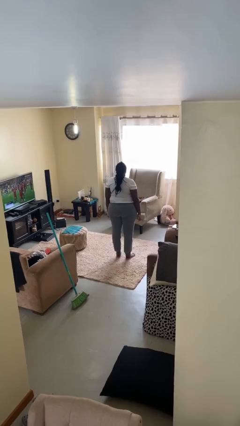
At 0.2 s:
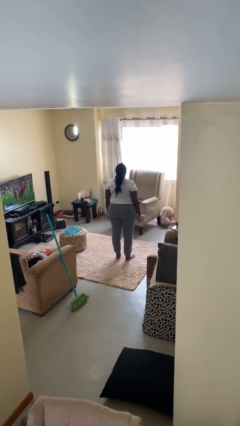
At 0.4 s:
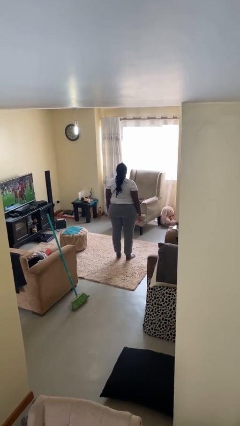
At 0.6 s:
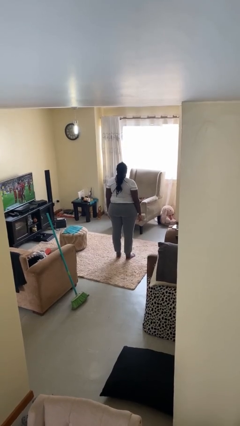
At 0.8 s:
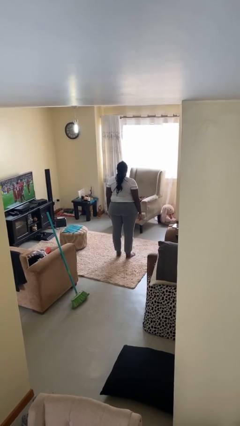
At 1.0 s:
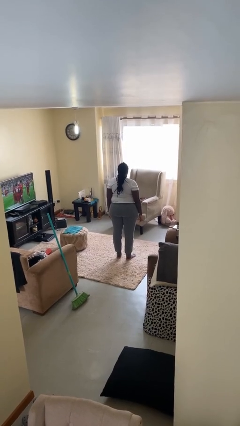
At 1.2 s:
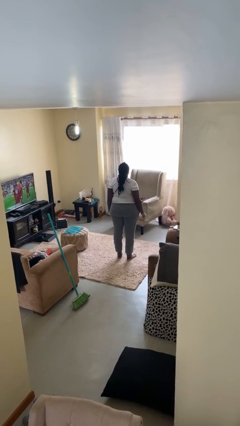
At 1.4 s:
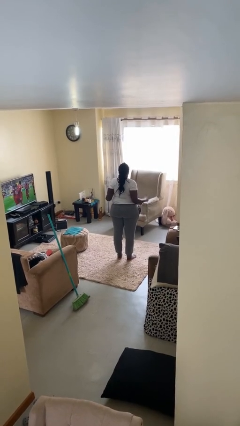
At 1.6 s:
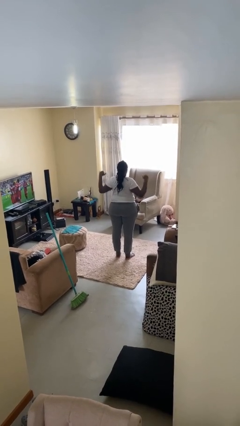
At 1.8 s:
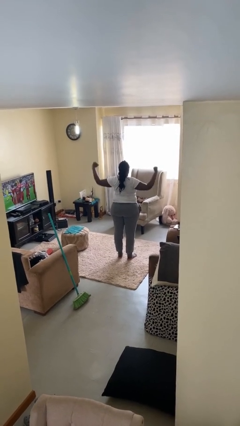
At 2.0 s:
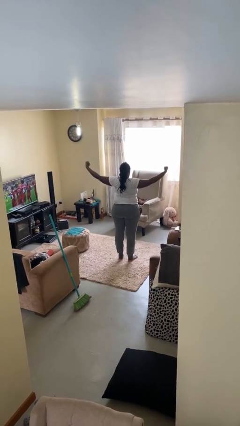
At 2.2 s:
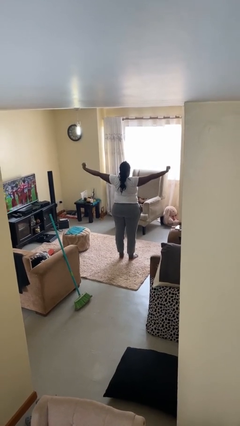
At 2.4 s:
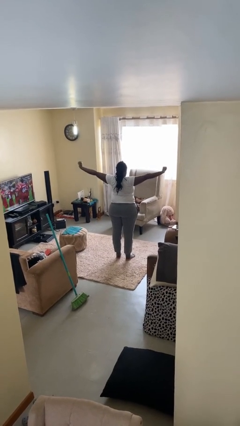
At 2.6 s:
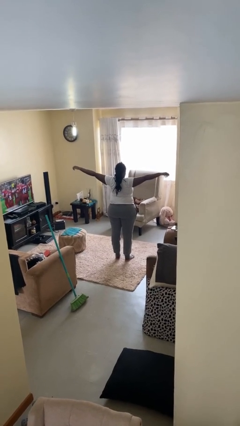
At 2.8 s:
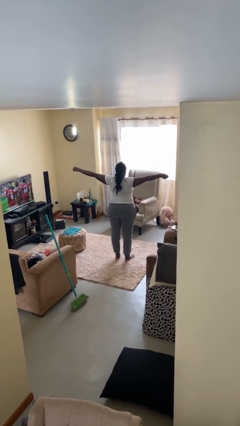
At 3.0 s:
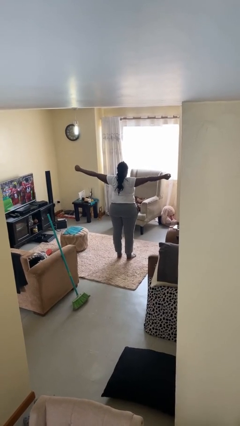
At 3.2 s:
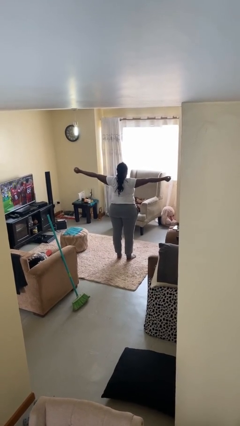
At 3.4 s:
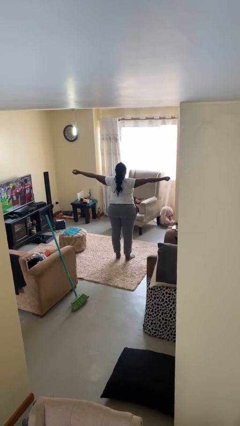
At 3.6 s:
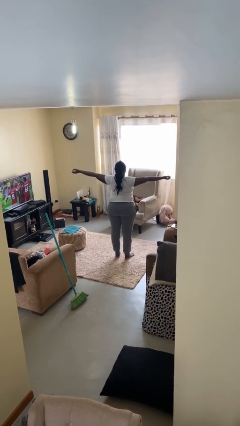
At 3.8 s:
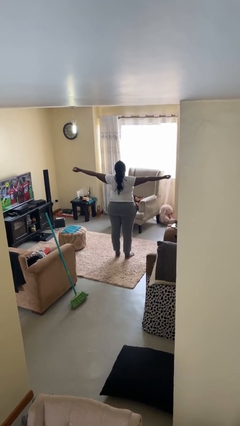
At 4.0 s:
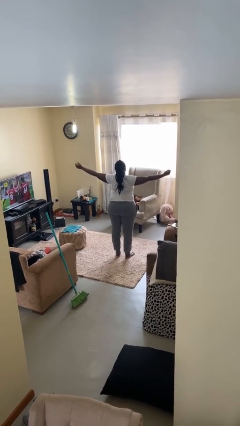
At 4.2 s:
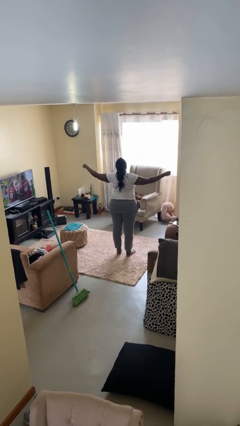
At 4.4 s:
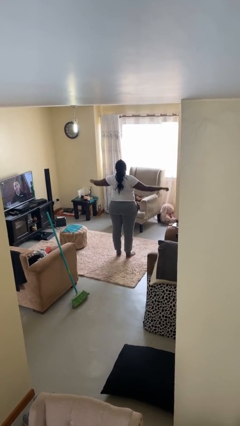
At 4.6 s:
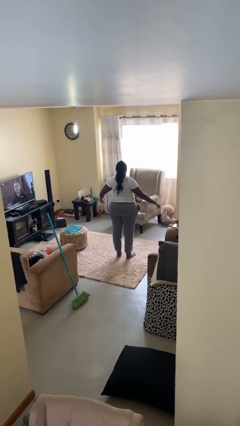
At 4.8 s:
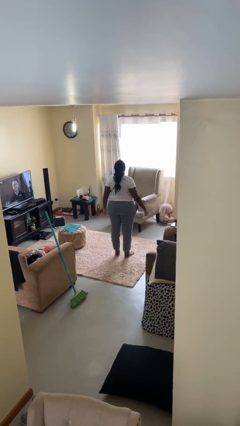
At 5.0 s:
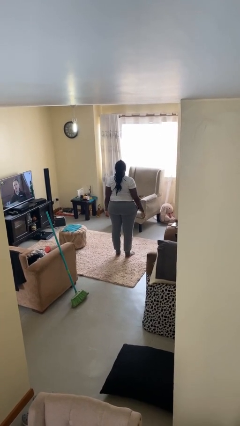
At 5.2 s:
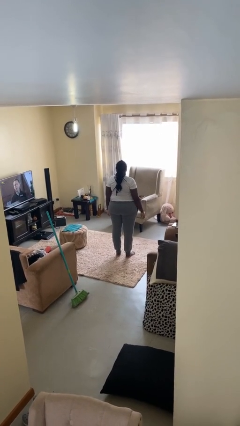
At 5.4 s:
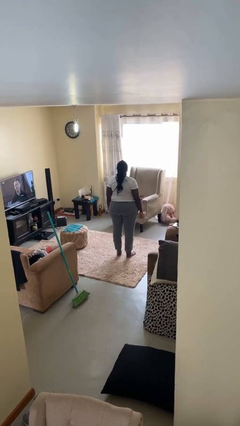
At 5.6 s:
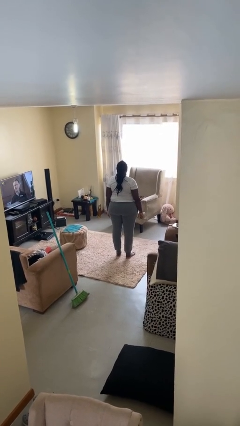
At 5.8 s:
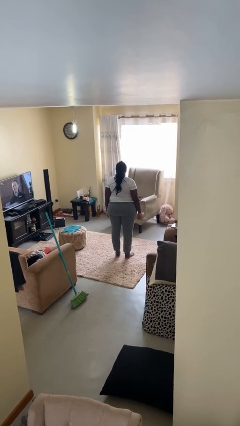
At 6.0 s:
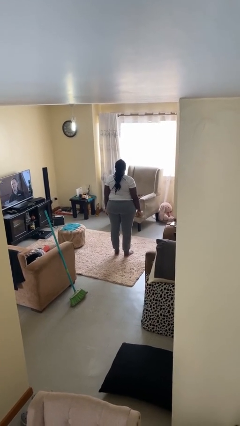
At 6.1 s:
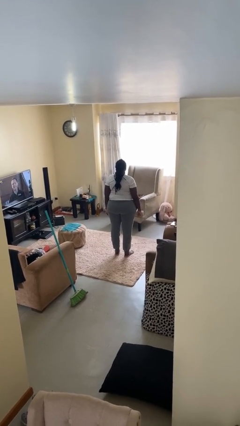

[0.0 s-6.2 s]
person stretches arms to side

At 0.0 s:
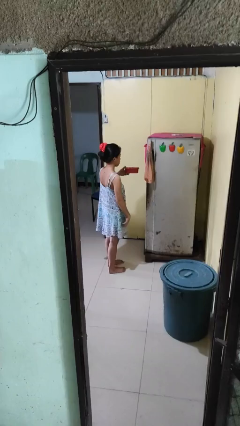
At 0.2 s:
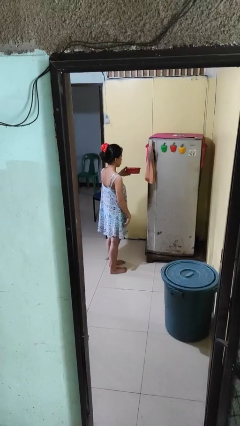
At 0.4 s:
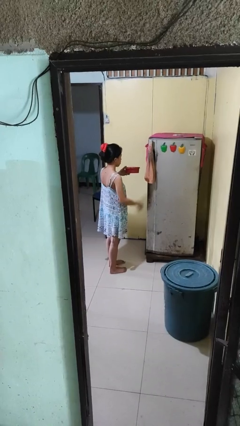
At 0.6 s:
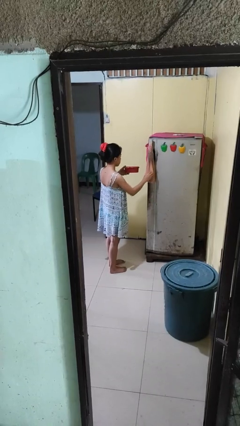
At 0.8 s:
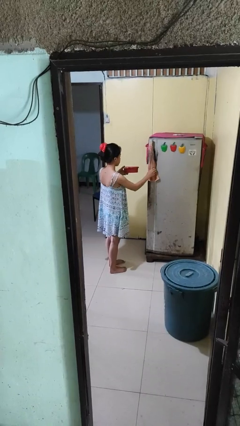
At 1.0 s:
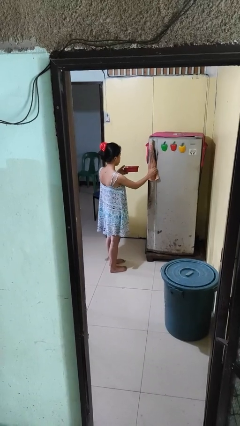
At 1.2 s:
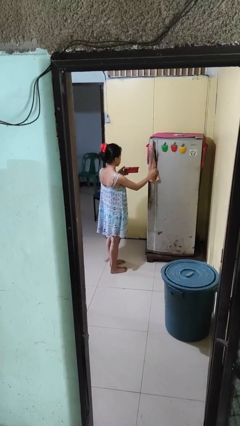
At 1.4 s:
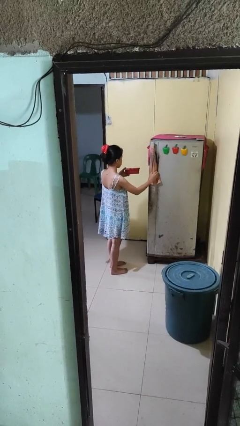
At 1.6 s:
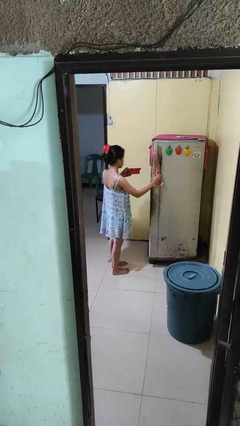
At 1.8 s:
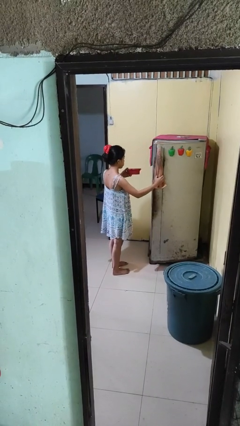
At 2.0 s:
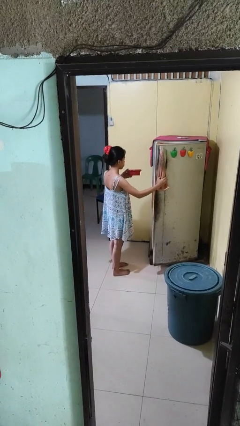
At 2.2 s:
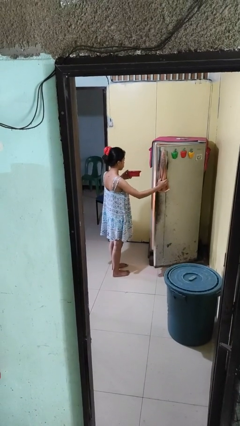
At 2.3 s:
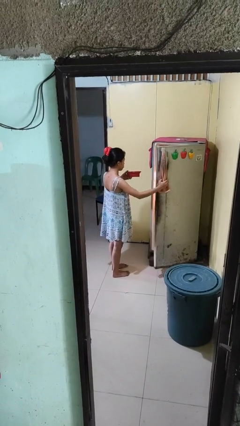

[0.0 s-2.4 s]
person opens refrigerator

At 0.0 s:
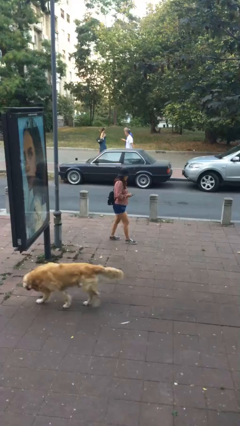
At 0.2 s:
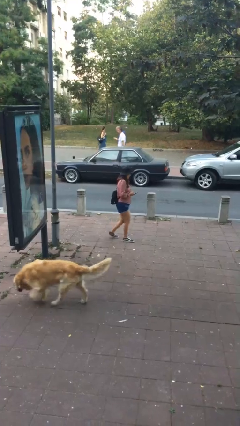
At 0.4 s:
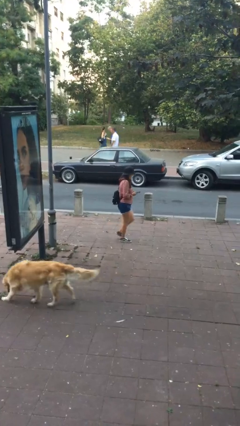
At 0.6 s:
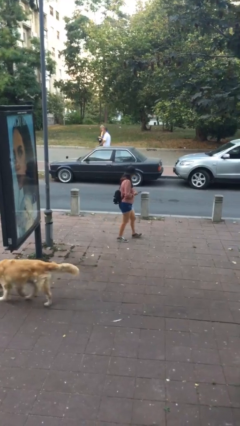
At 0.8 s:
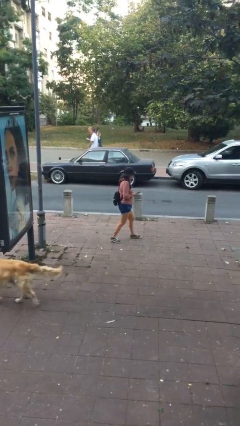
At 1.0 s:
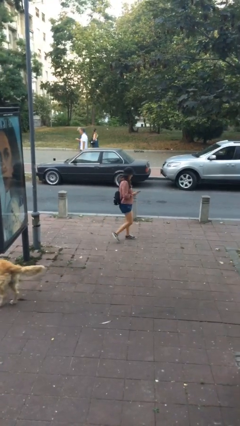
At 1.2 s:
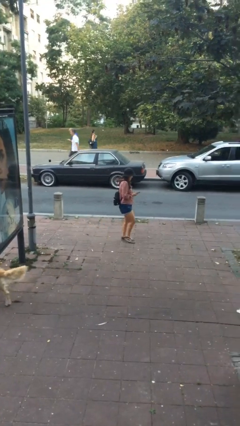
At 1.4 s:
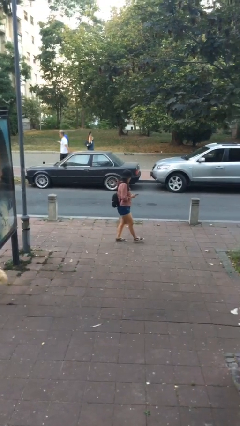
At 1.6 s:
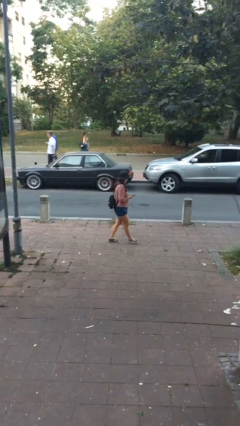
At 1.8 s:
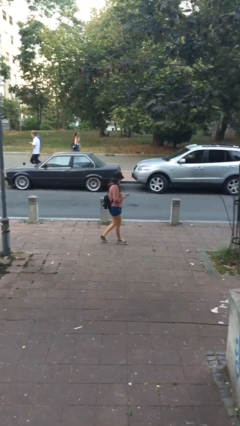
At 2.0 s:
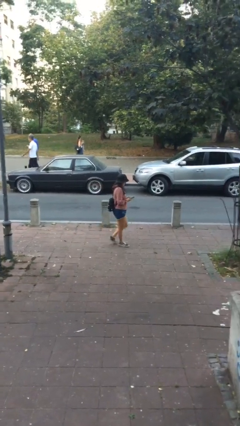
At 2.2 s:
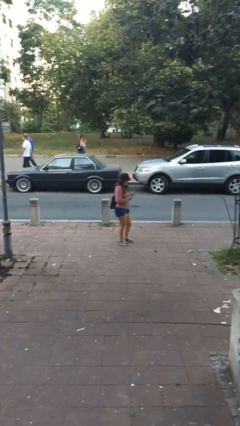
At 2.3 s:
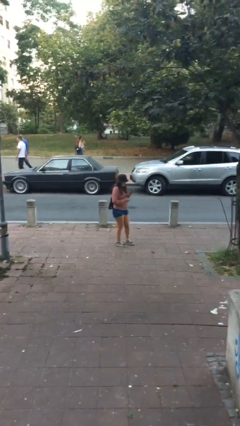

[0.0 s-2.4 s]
person texts on phone

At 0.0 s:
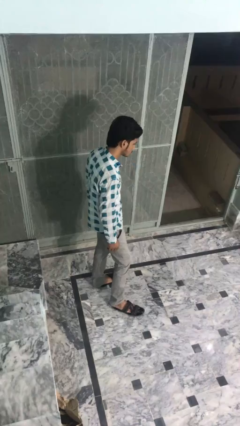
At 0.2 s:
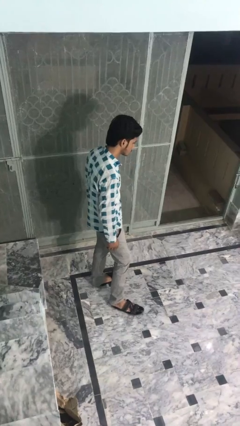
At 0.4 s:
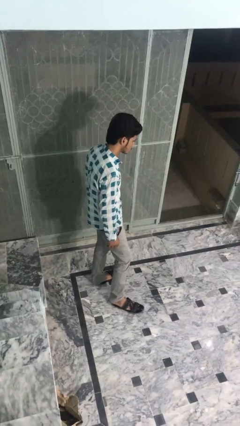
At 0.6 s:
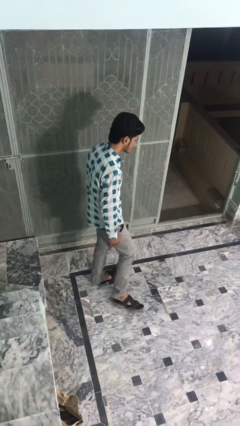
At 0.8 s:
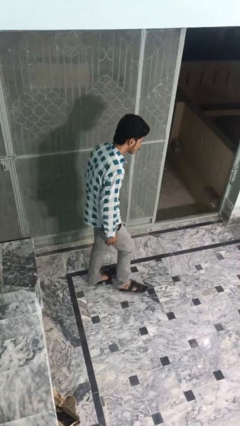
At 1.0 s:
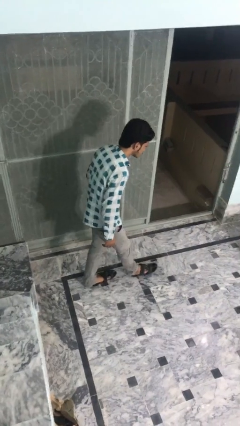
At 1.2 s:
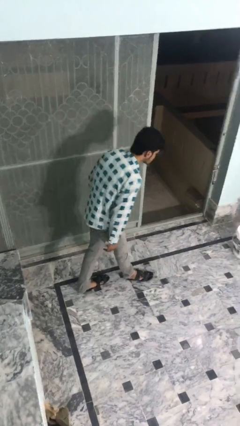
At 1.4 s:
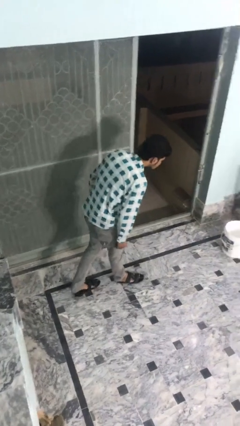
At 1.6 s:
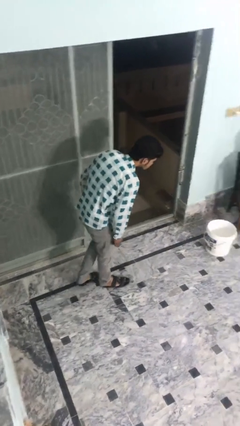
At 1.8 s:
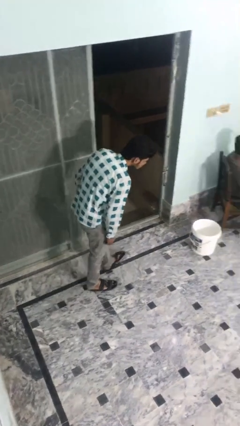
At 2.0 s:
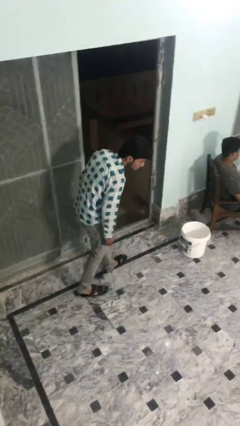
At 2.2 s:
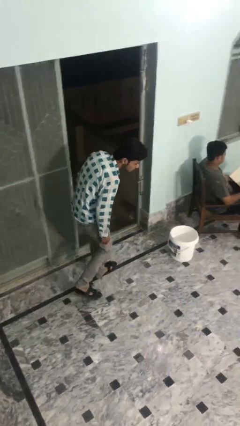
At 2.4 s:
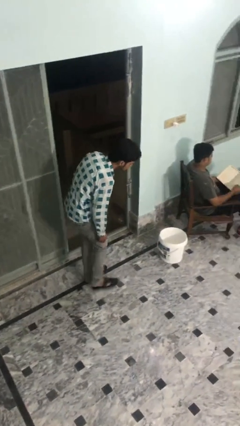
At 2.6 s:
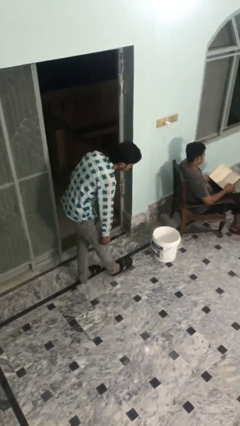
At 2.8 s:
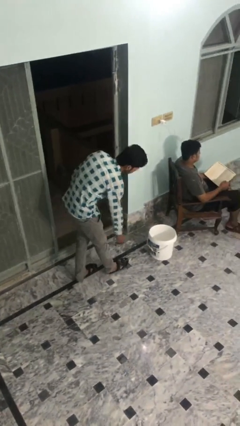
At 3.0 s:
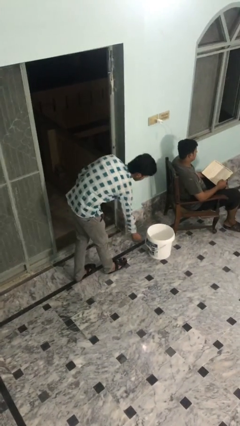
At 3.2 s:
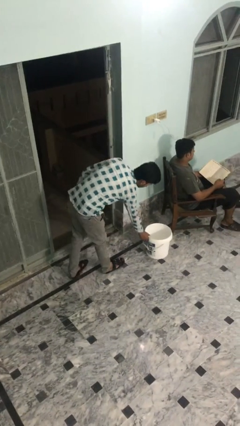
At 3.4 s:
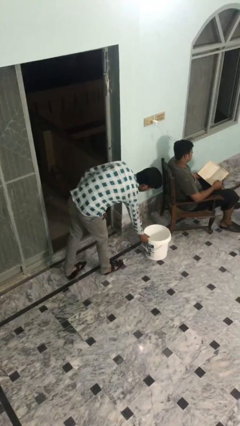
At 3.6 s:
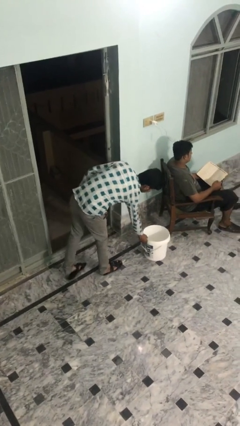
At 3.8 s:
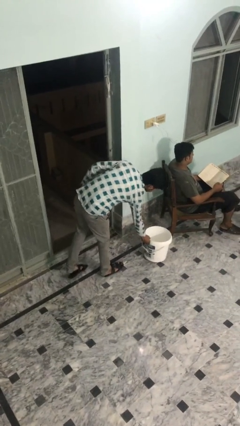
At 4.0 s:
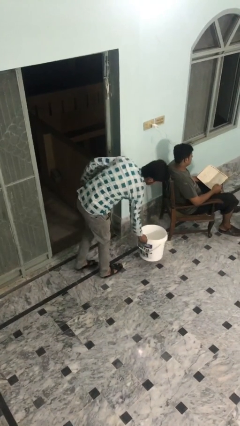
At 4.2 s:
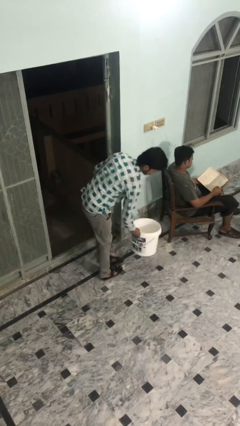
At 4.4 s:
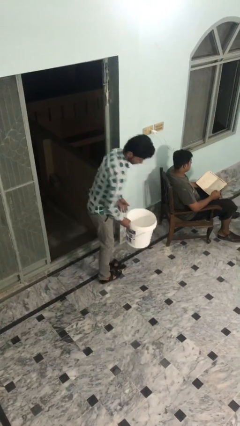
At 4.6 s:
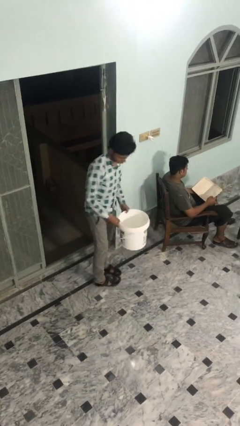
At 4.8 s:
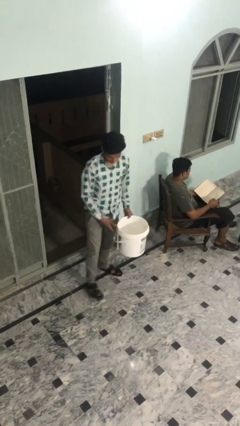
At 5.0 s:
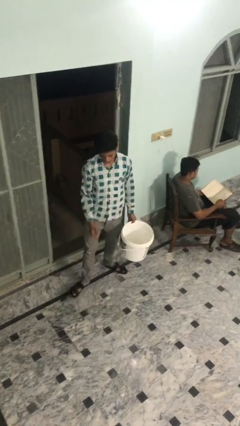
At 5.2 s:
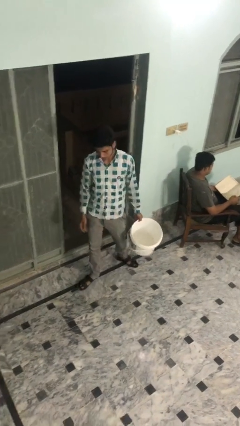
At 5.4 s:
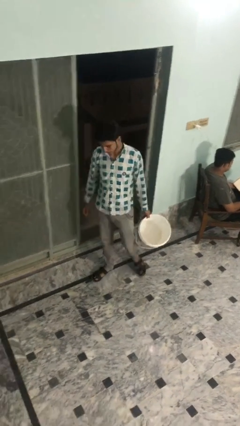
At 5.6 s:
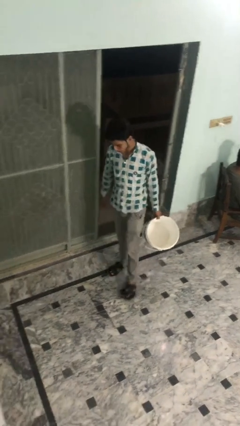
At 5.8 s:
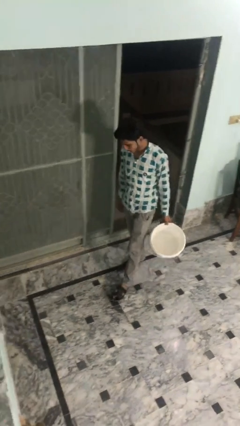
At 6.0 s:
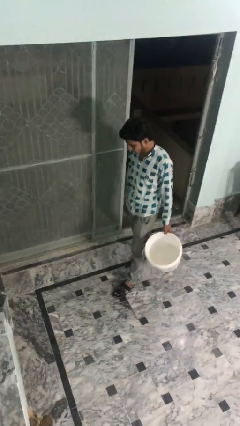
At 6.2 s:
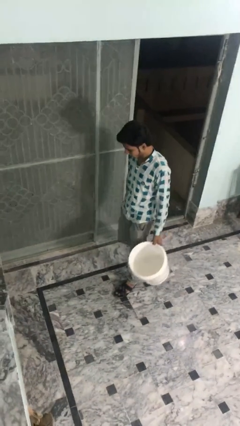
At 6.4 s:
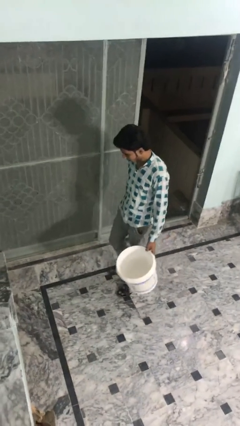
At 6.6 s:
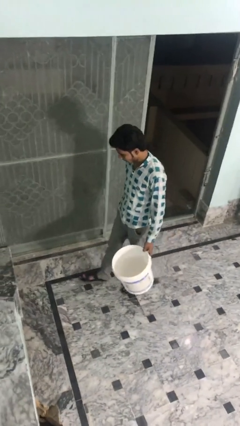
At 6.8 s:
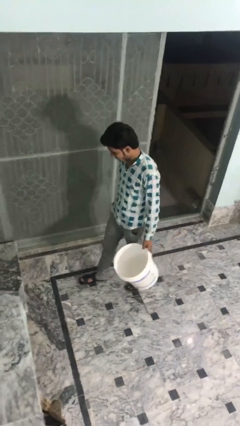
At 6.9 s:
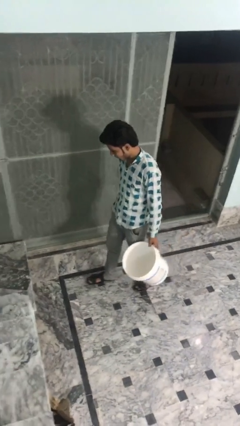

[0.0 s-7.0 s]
person steals object from person
